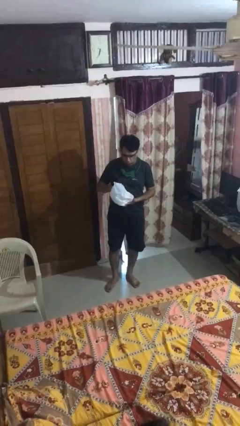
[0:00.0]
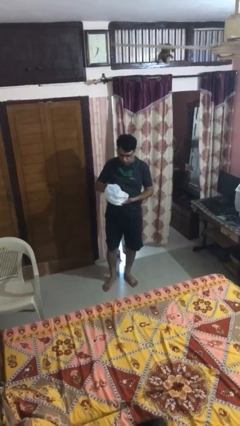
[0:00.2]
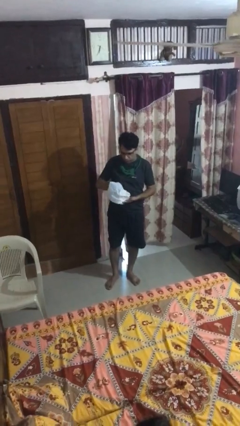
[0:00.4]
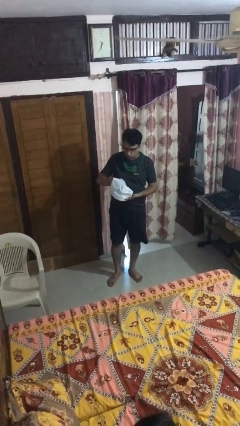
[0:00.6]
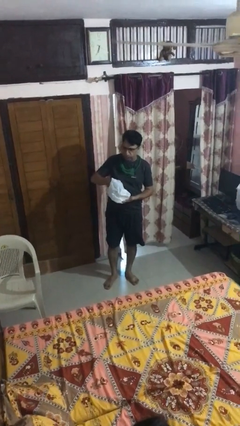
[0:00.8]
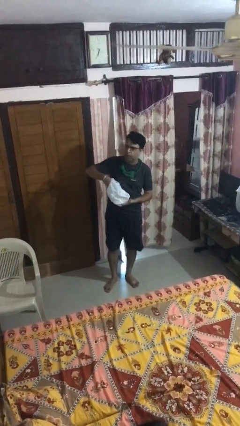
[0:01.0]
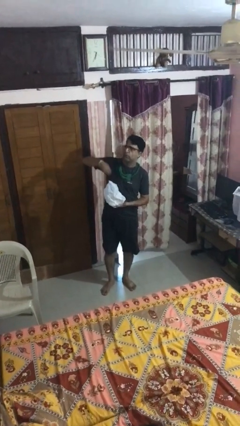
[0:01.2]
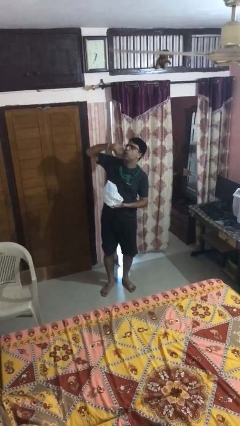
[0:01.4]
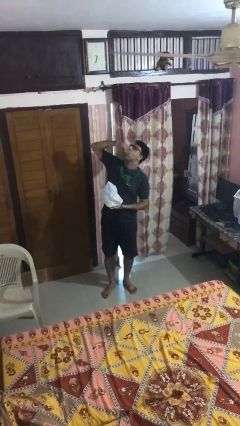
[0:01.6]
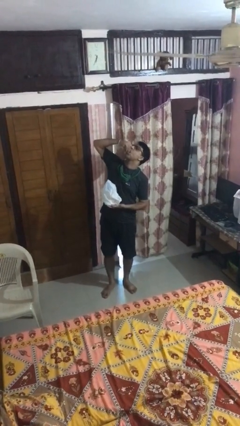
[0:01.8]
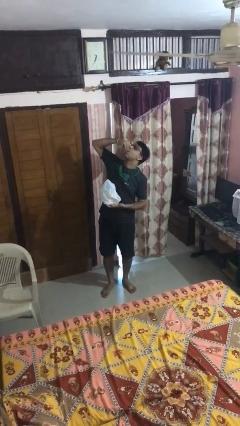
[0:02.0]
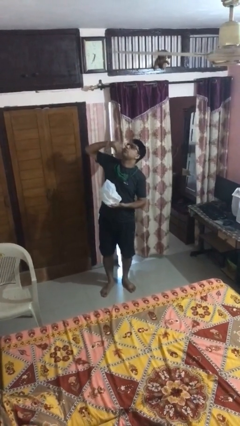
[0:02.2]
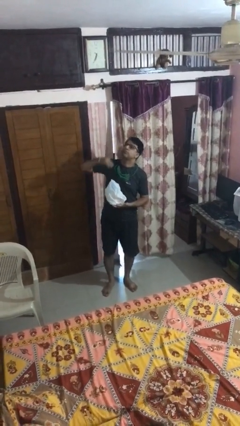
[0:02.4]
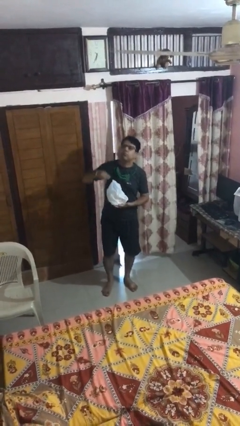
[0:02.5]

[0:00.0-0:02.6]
person eats snack from bag

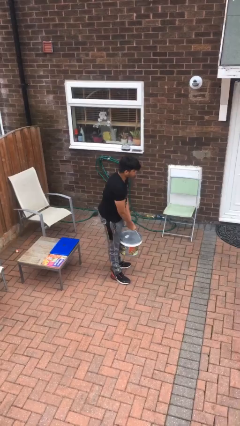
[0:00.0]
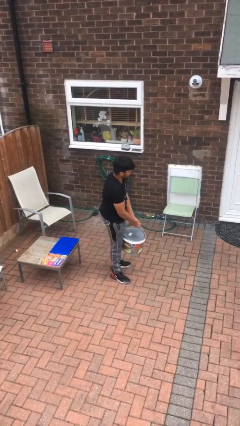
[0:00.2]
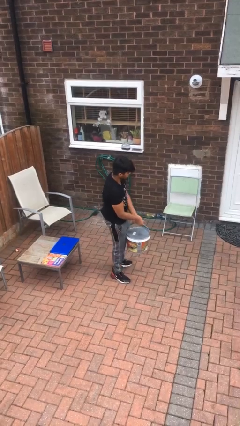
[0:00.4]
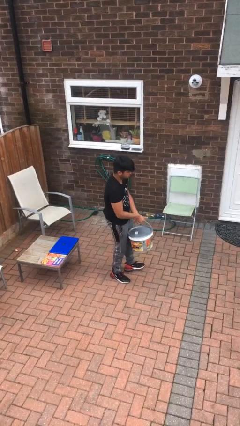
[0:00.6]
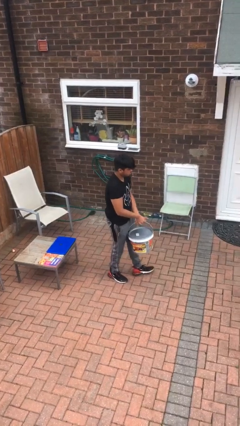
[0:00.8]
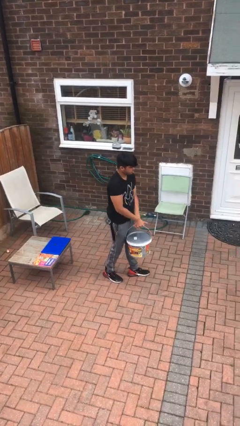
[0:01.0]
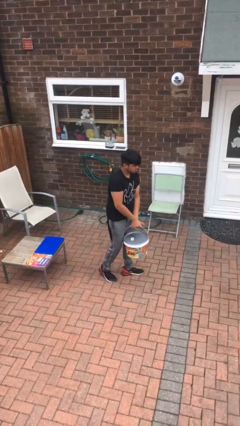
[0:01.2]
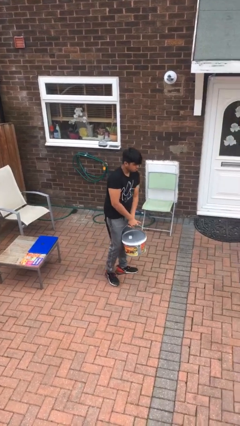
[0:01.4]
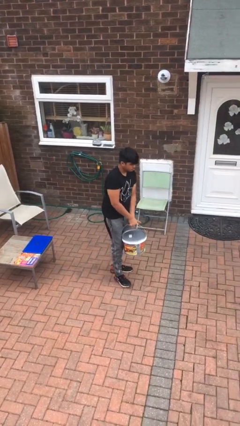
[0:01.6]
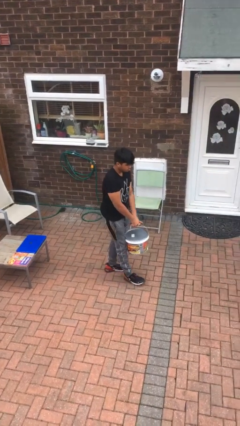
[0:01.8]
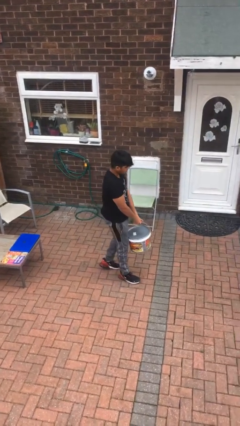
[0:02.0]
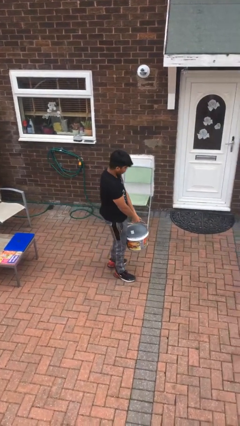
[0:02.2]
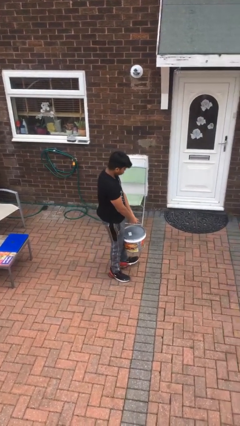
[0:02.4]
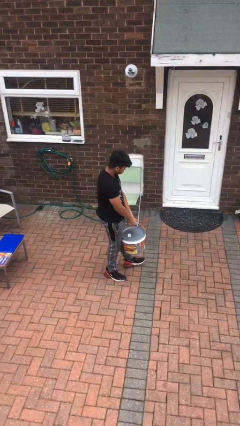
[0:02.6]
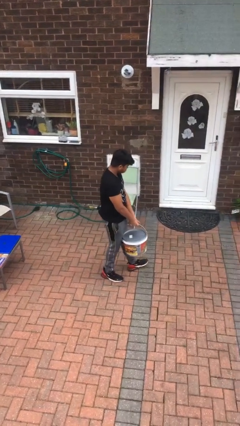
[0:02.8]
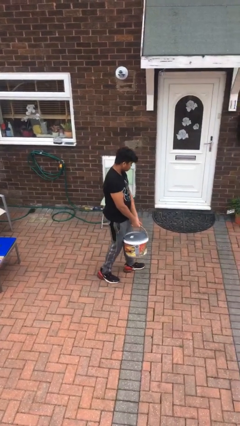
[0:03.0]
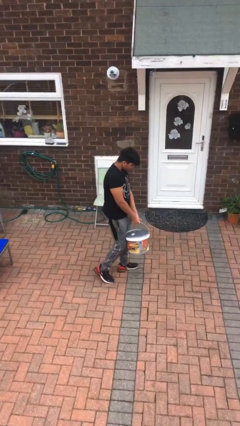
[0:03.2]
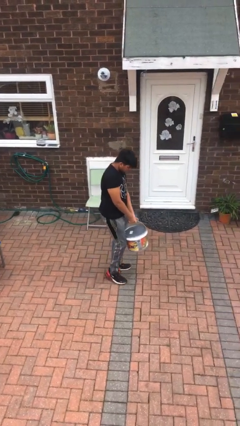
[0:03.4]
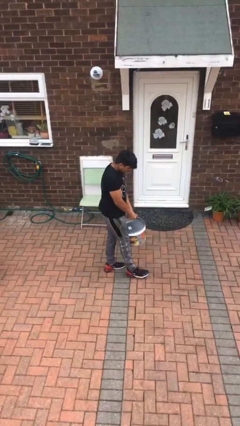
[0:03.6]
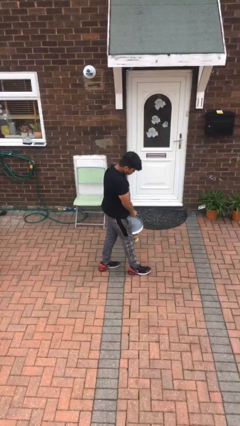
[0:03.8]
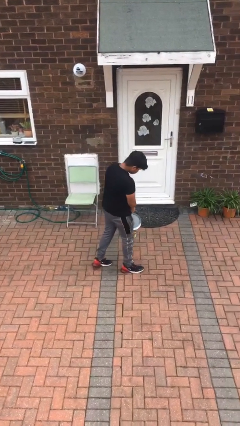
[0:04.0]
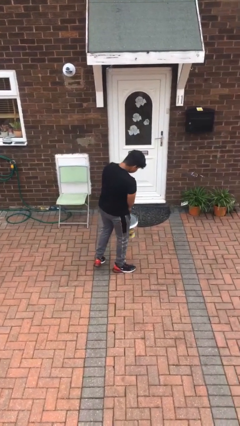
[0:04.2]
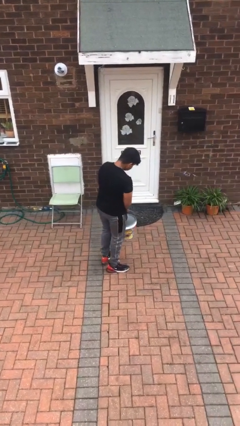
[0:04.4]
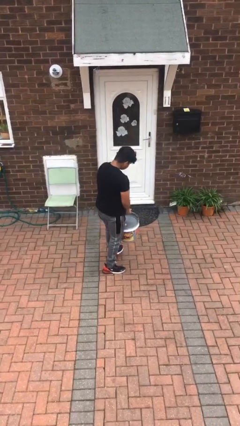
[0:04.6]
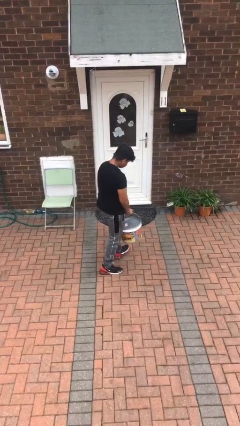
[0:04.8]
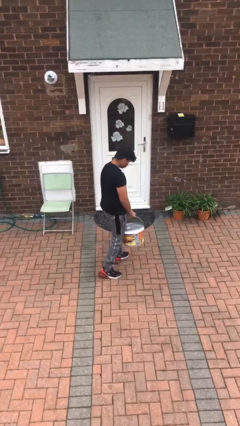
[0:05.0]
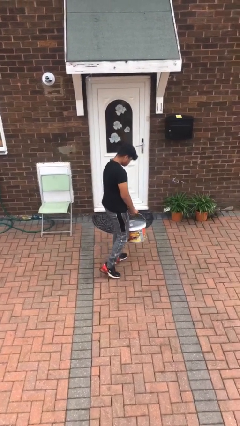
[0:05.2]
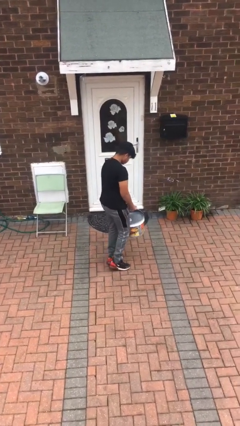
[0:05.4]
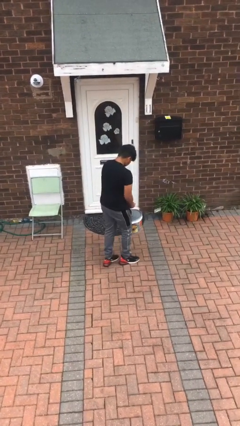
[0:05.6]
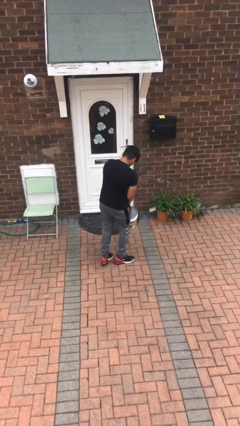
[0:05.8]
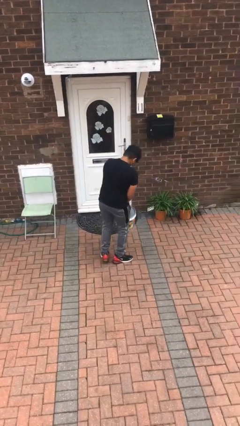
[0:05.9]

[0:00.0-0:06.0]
person carries heavy object

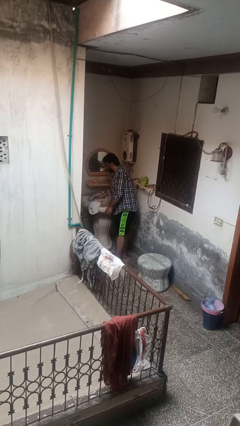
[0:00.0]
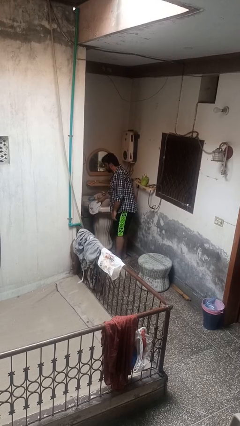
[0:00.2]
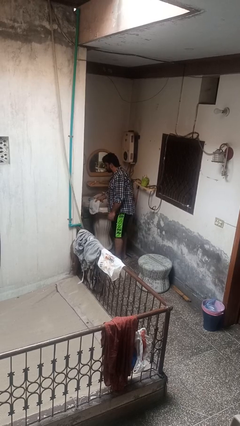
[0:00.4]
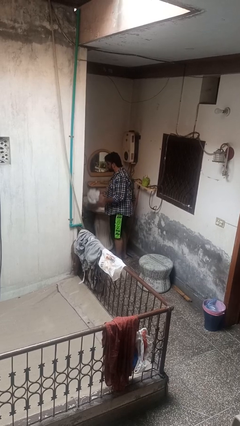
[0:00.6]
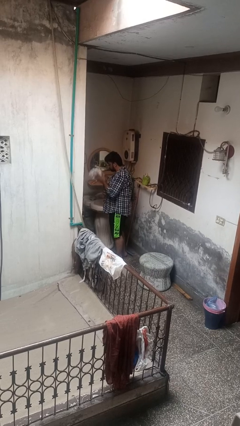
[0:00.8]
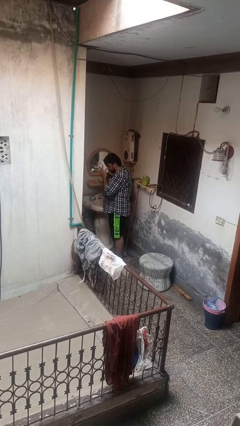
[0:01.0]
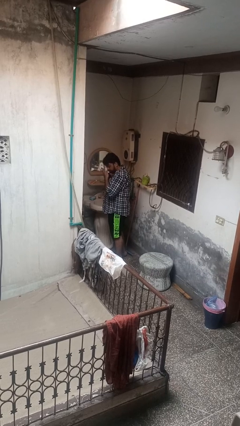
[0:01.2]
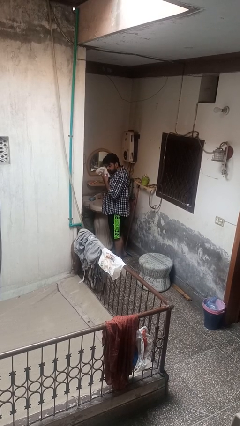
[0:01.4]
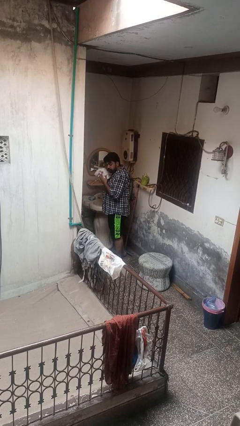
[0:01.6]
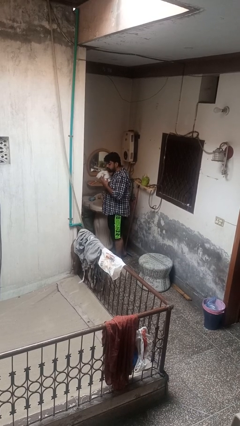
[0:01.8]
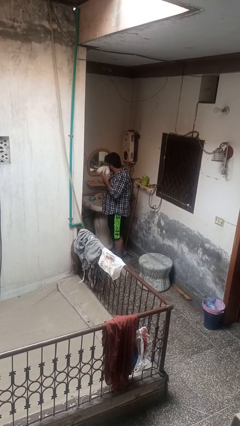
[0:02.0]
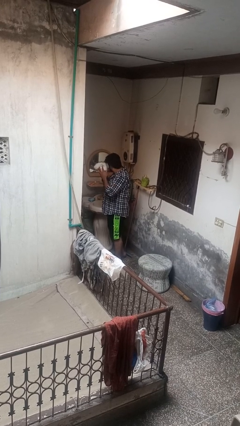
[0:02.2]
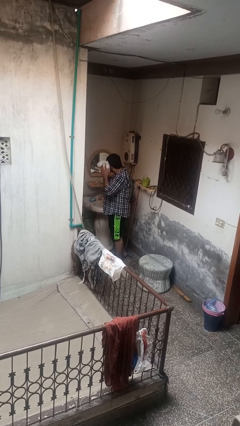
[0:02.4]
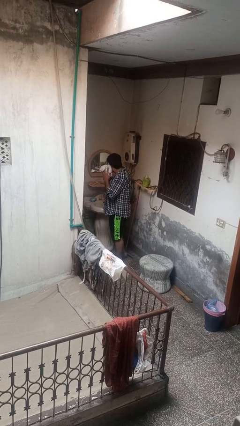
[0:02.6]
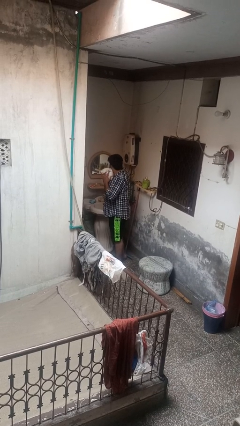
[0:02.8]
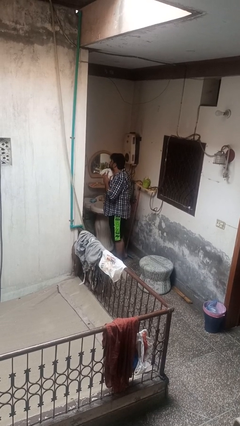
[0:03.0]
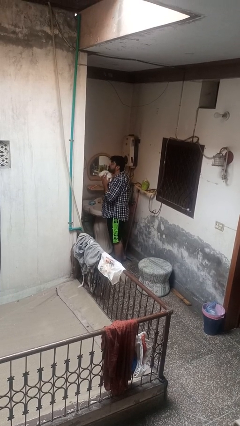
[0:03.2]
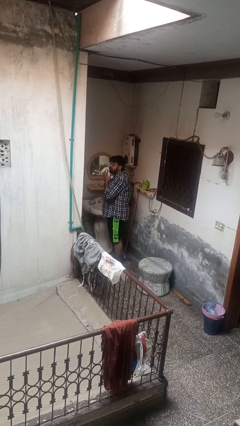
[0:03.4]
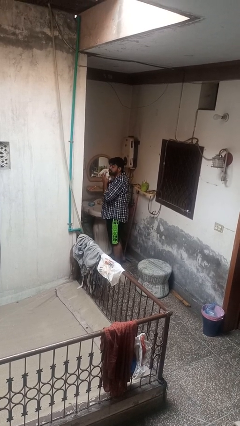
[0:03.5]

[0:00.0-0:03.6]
person dries face with towel

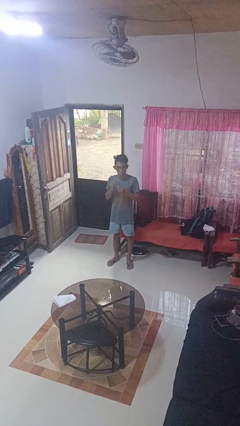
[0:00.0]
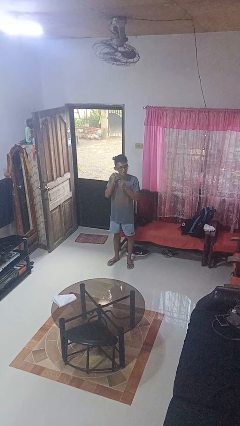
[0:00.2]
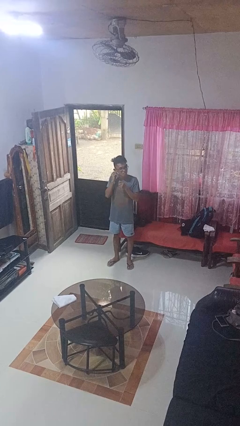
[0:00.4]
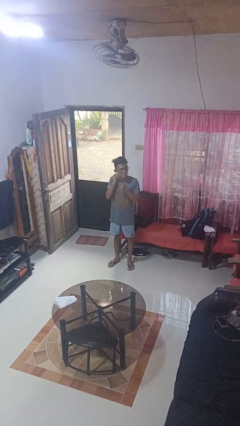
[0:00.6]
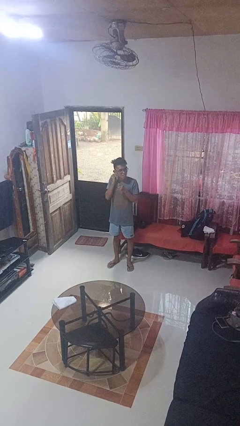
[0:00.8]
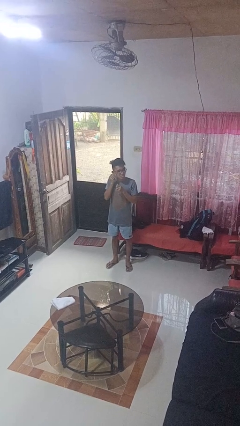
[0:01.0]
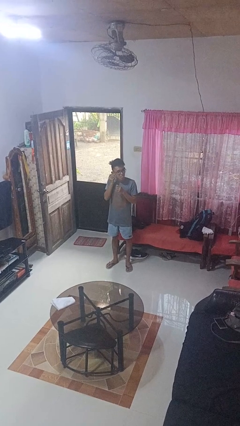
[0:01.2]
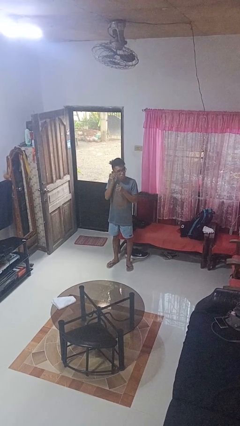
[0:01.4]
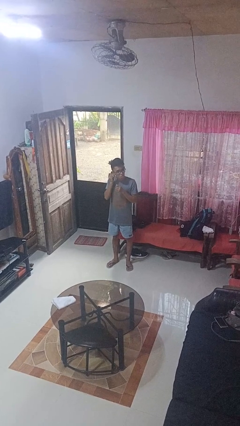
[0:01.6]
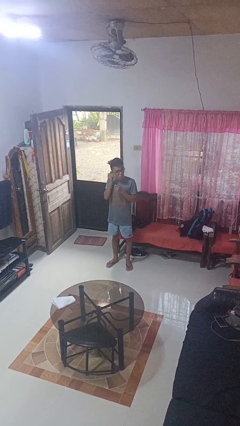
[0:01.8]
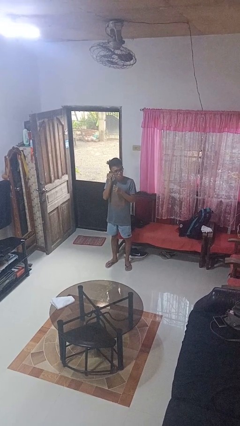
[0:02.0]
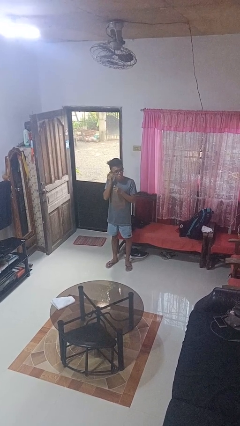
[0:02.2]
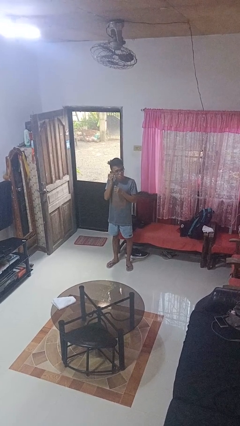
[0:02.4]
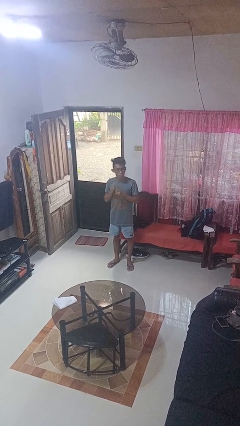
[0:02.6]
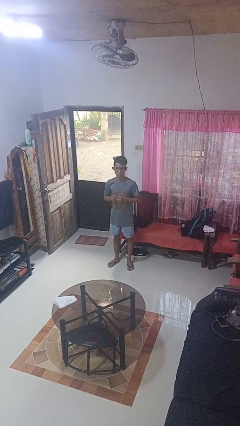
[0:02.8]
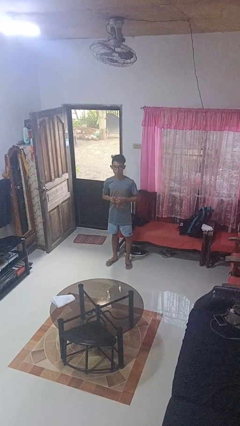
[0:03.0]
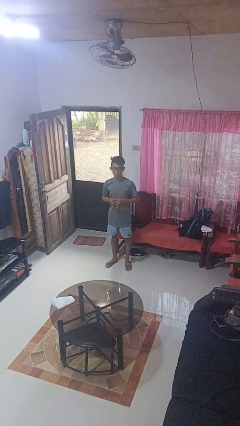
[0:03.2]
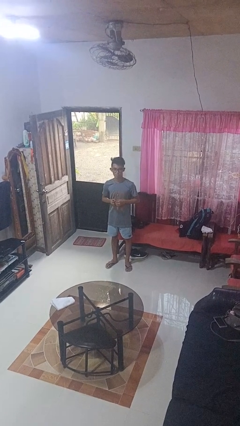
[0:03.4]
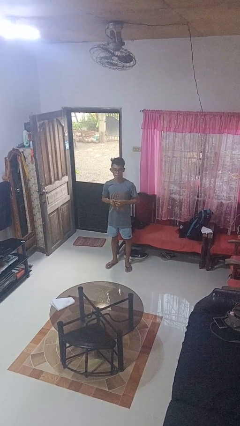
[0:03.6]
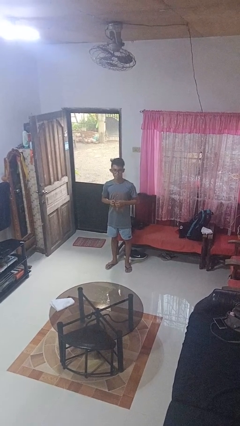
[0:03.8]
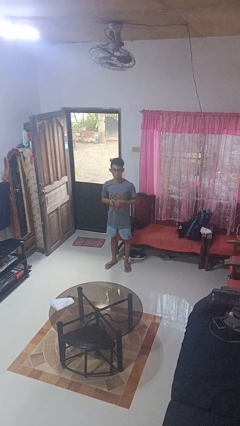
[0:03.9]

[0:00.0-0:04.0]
person puts on earrings

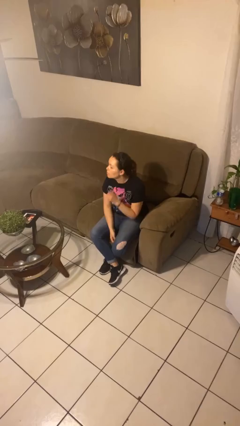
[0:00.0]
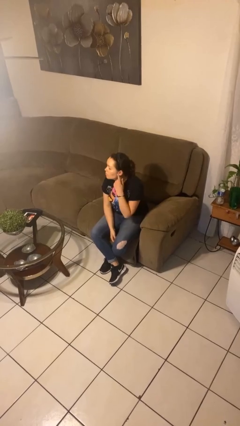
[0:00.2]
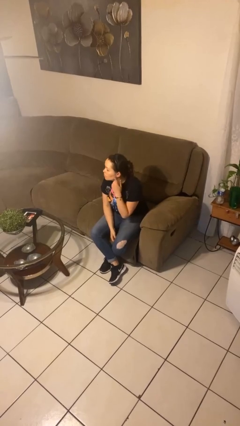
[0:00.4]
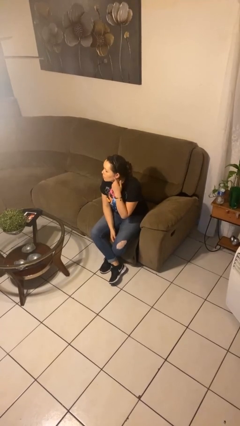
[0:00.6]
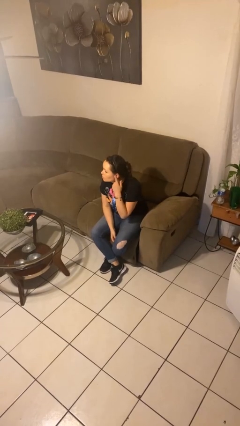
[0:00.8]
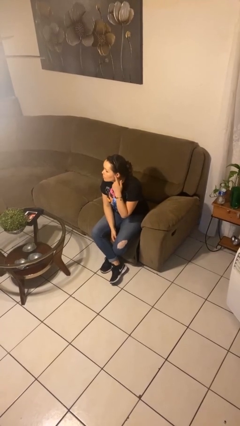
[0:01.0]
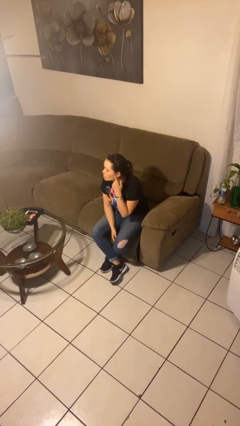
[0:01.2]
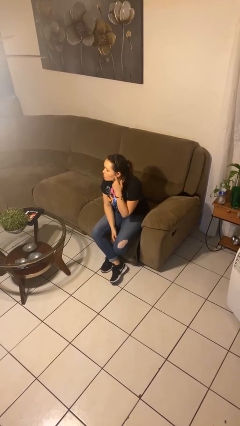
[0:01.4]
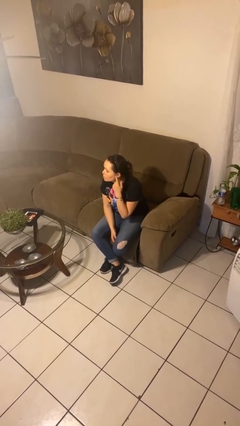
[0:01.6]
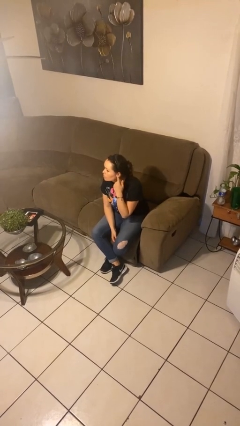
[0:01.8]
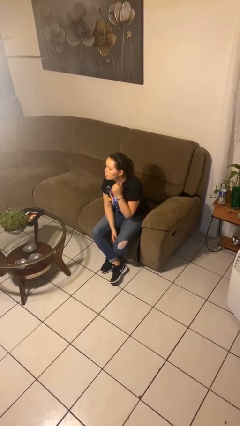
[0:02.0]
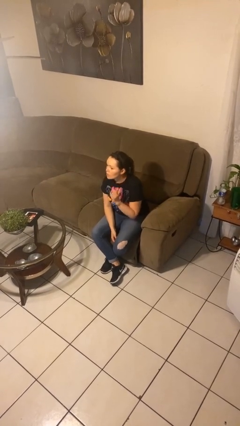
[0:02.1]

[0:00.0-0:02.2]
person gestures listen closely
